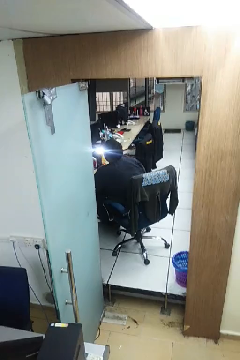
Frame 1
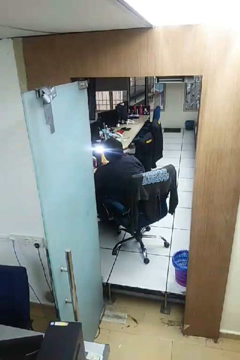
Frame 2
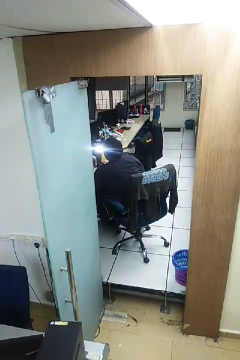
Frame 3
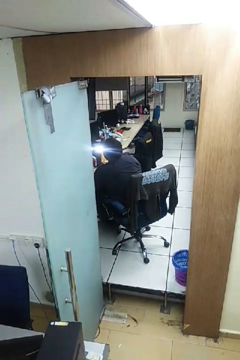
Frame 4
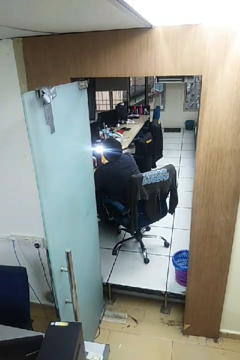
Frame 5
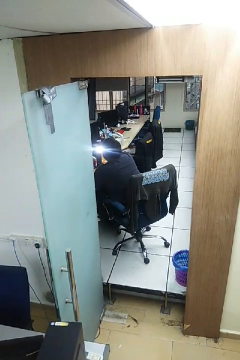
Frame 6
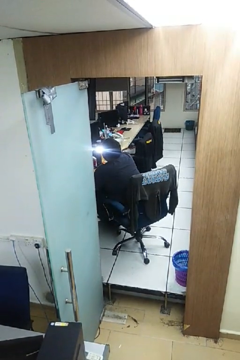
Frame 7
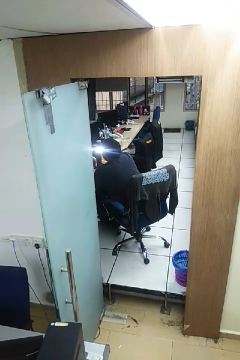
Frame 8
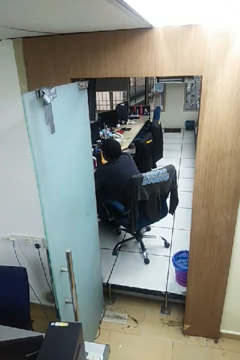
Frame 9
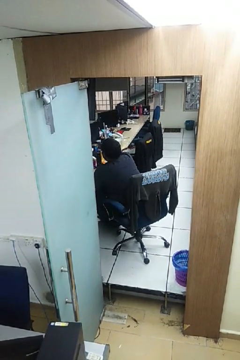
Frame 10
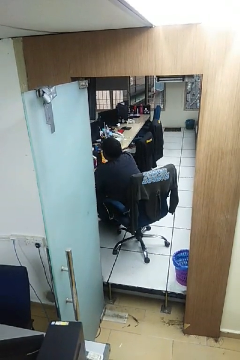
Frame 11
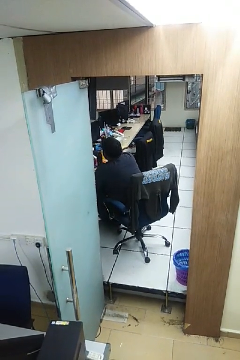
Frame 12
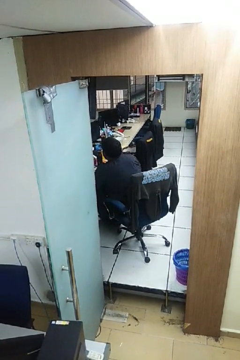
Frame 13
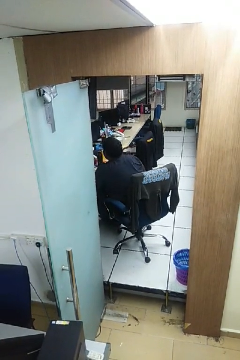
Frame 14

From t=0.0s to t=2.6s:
person turns off lamp

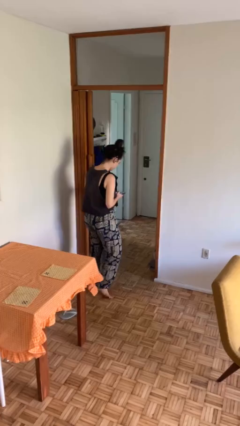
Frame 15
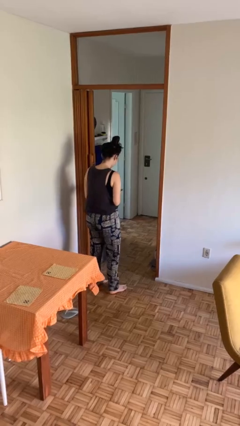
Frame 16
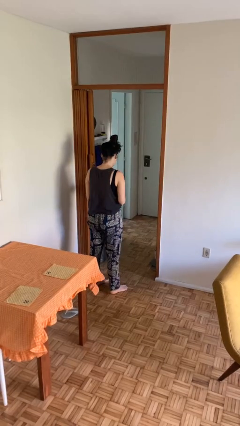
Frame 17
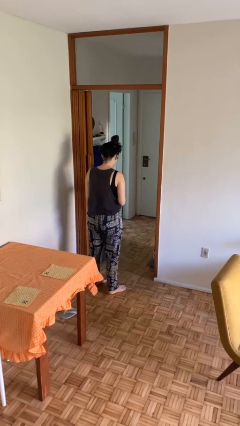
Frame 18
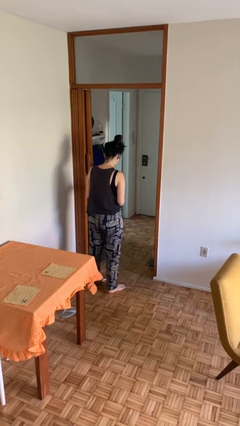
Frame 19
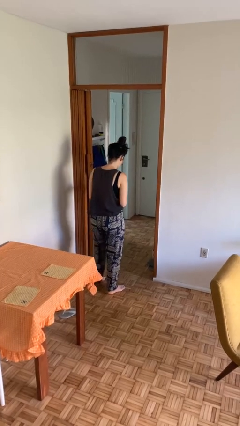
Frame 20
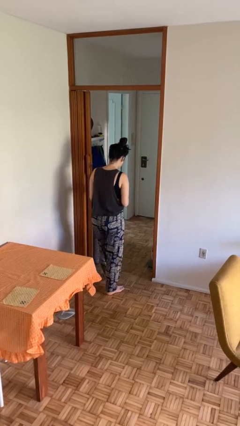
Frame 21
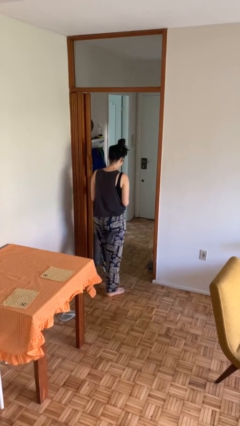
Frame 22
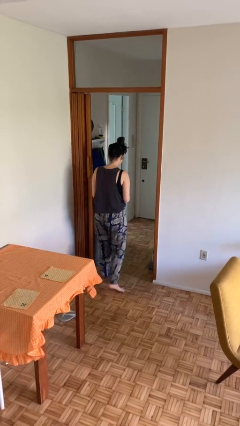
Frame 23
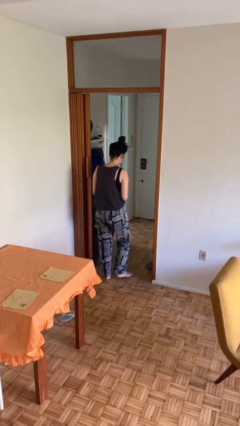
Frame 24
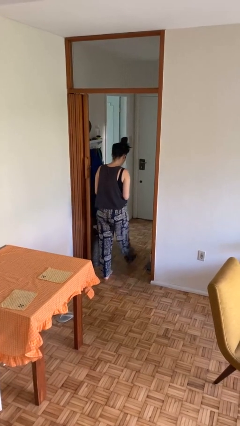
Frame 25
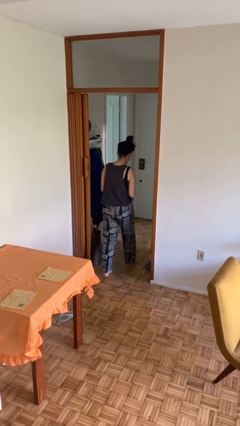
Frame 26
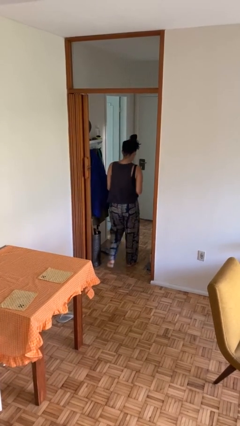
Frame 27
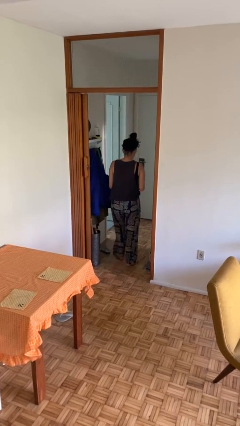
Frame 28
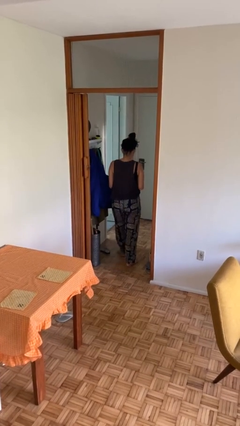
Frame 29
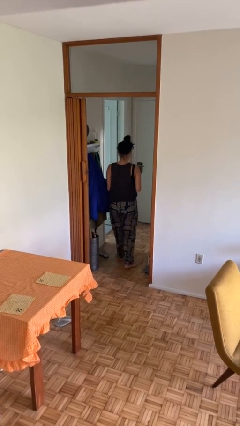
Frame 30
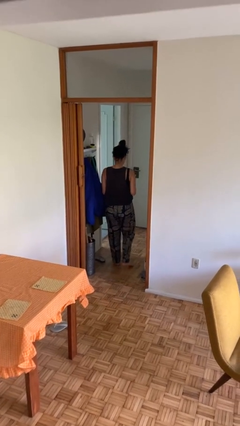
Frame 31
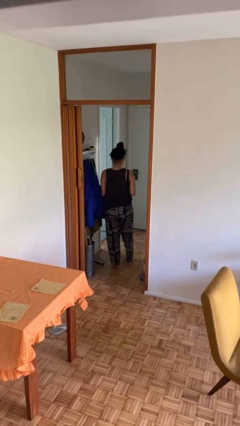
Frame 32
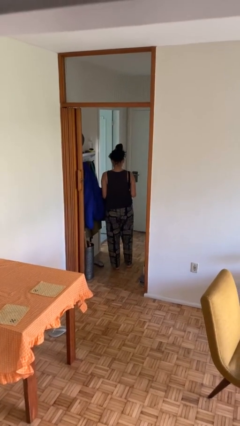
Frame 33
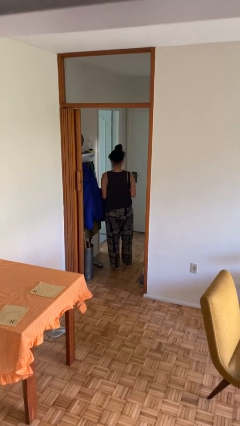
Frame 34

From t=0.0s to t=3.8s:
person exits scene through structure

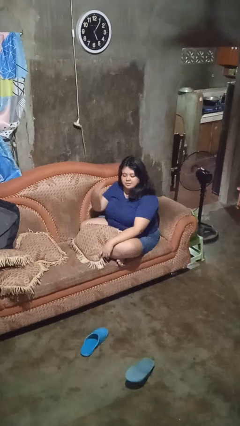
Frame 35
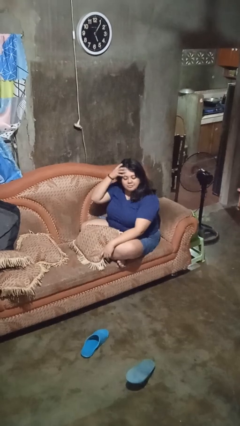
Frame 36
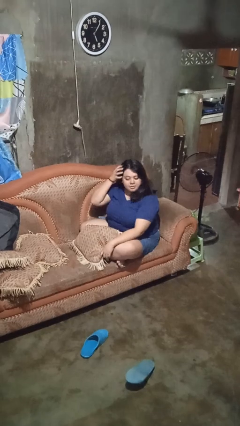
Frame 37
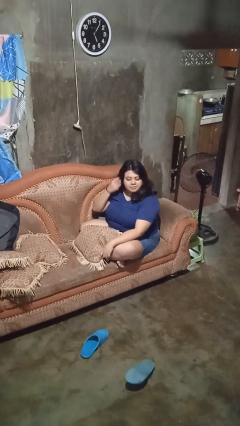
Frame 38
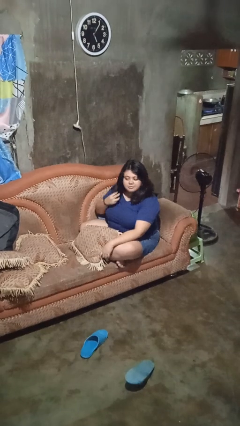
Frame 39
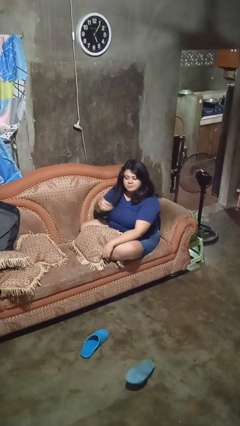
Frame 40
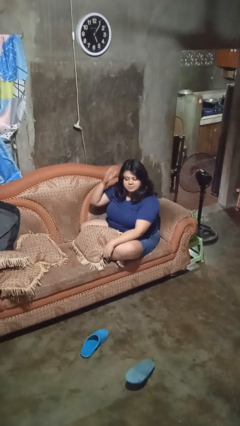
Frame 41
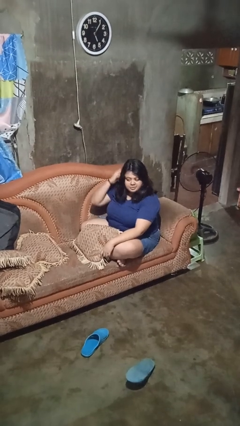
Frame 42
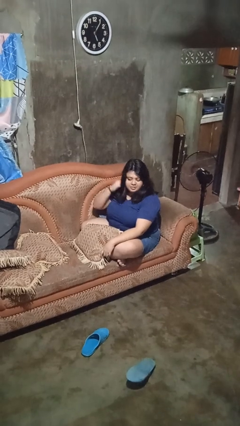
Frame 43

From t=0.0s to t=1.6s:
person strokes hair

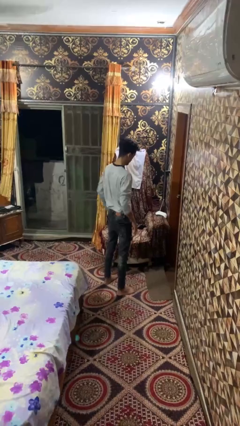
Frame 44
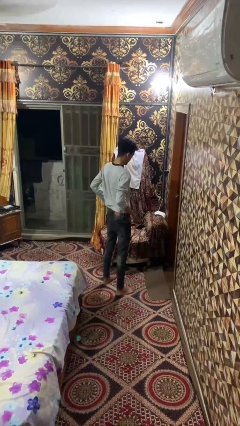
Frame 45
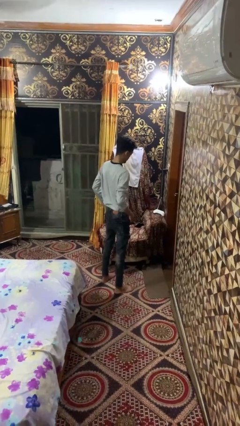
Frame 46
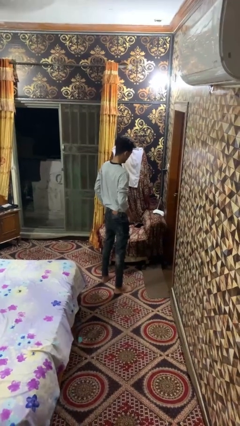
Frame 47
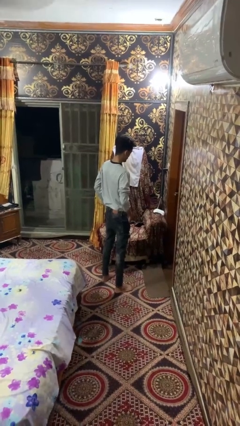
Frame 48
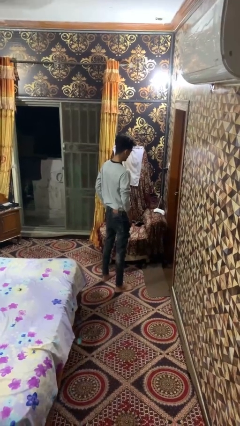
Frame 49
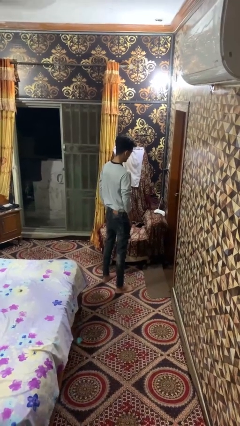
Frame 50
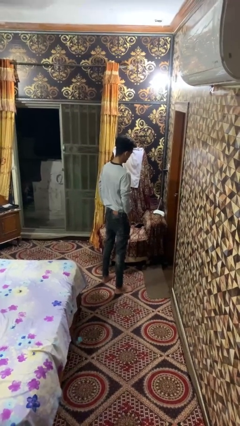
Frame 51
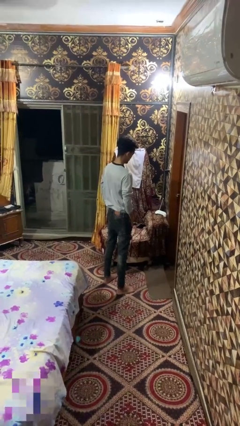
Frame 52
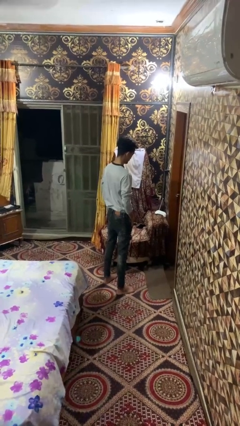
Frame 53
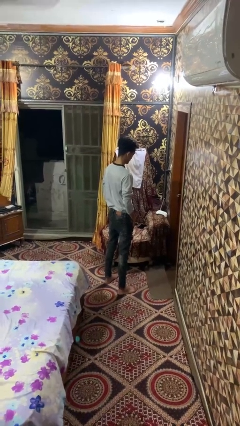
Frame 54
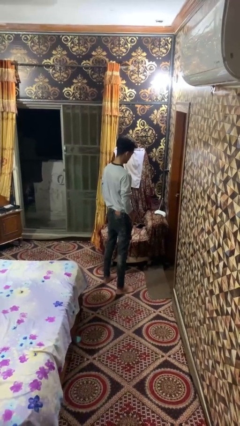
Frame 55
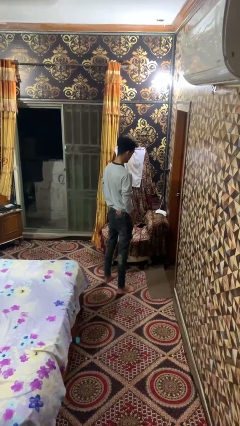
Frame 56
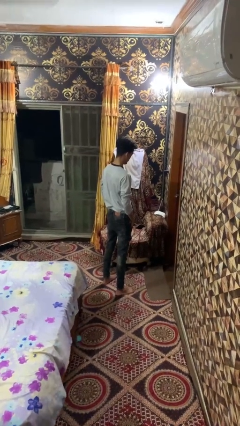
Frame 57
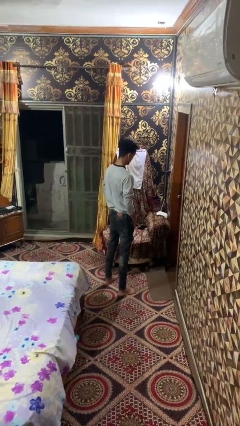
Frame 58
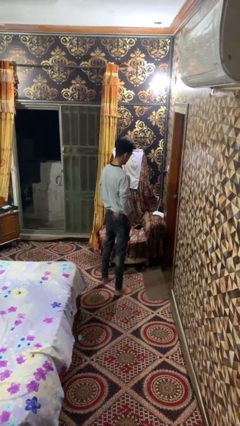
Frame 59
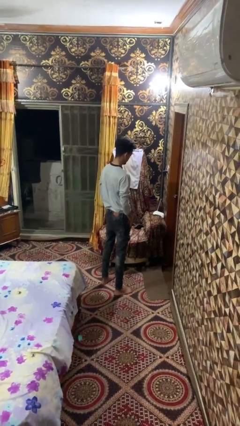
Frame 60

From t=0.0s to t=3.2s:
person puts hands in back pockets

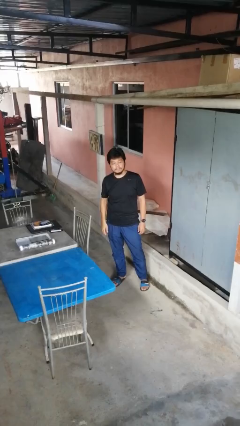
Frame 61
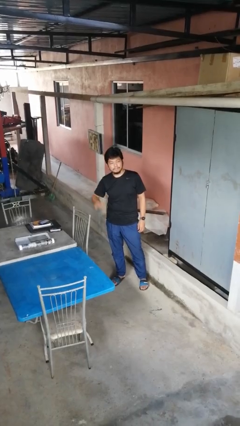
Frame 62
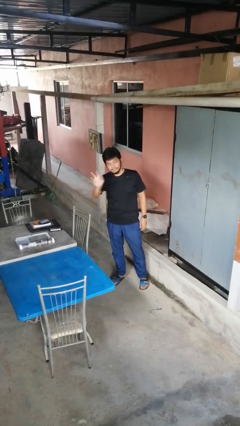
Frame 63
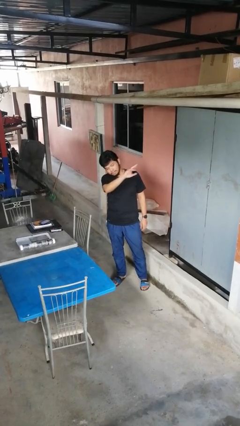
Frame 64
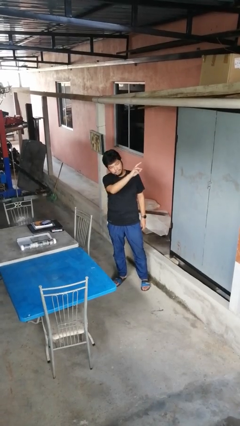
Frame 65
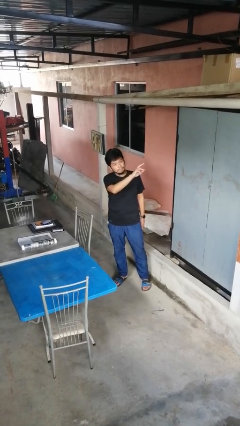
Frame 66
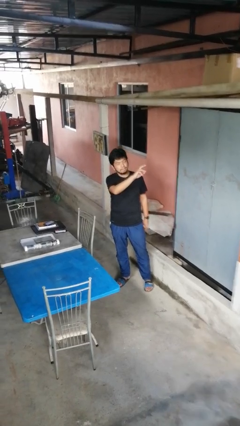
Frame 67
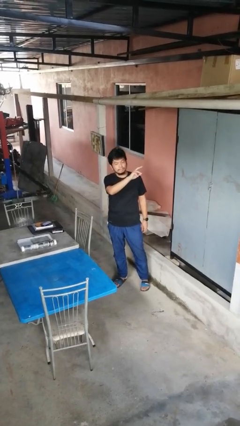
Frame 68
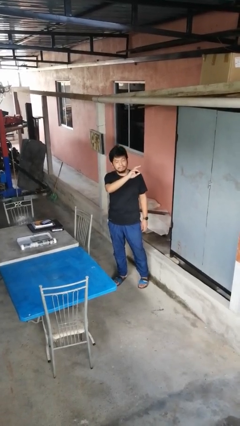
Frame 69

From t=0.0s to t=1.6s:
person gestures swipe left

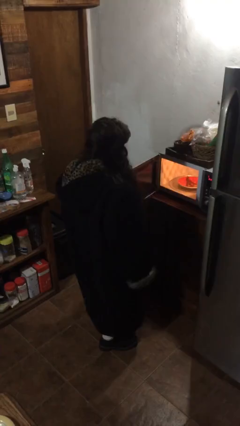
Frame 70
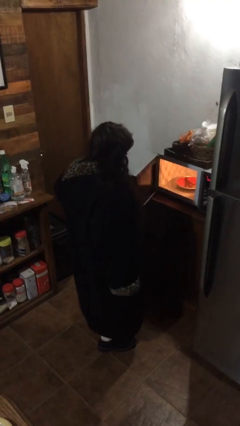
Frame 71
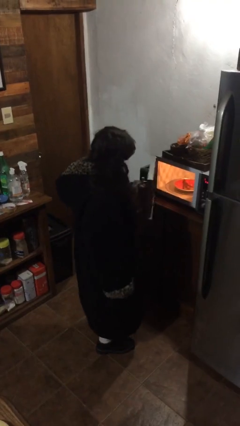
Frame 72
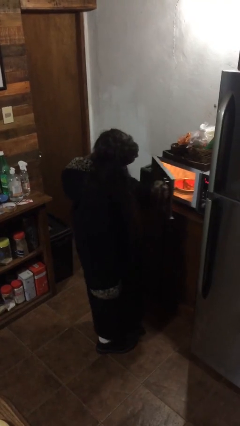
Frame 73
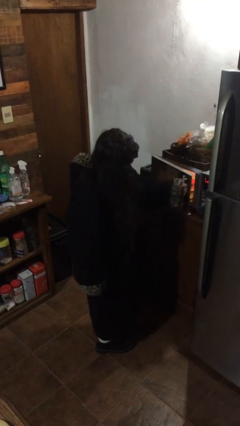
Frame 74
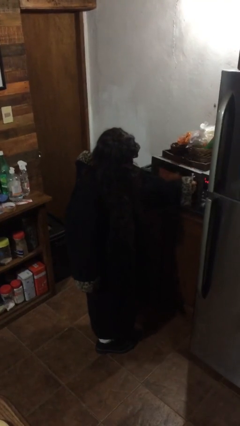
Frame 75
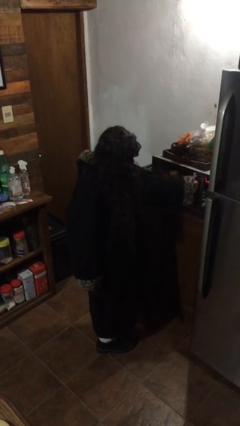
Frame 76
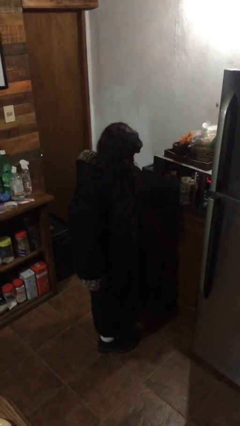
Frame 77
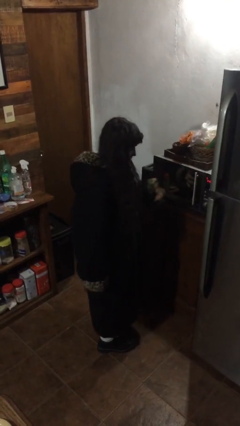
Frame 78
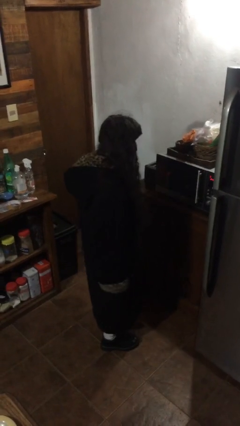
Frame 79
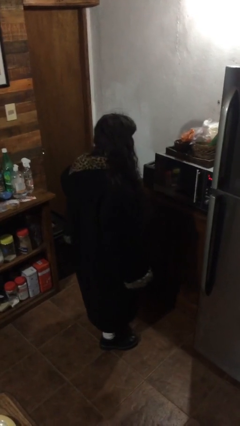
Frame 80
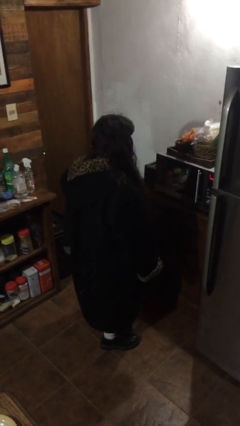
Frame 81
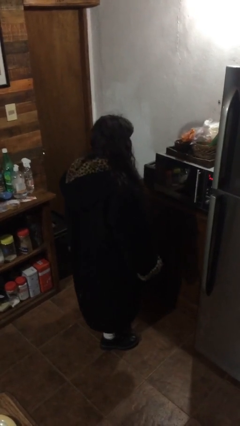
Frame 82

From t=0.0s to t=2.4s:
person closes microwave

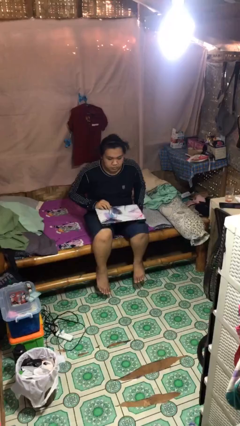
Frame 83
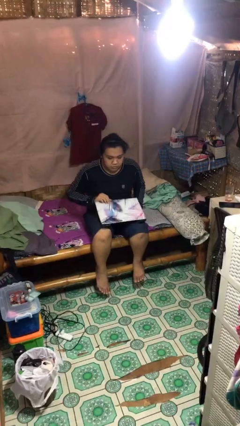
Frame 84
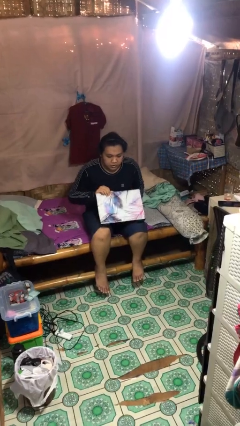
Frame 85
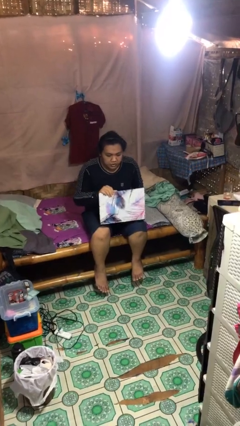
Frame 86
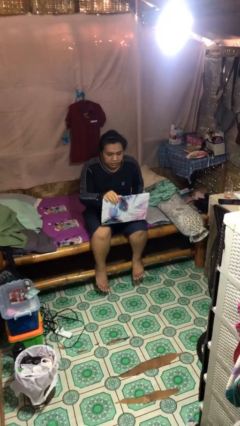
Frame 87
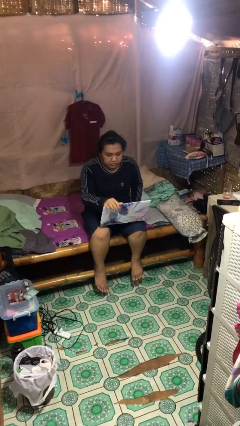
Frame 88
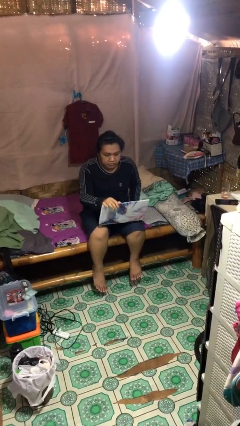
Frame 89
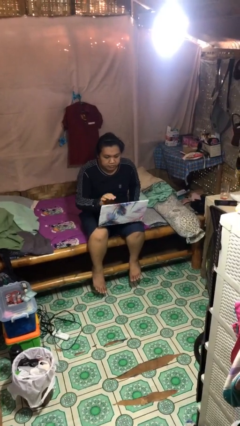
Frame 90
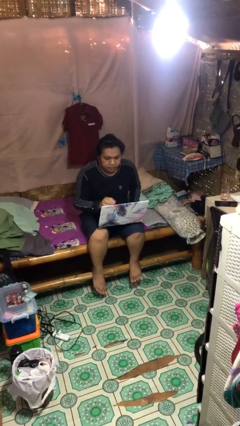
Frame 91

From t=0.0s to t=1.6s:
person opens laptop

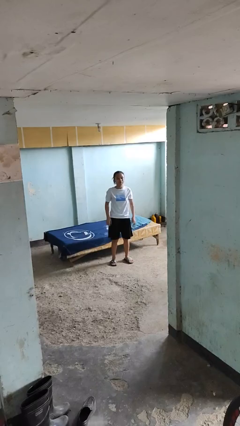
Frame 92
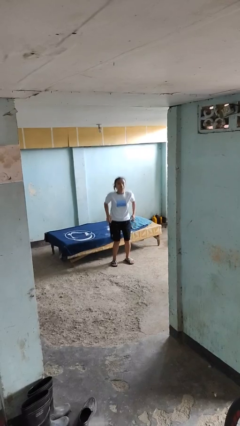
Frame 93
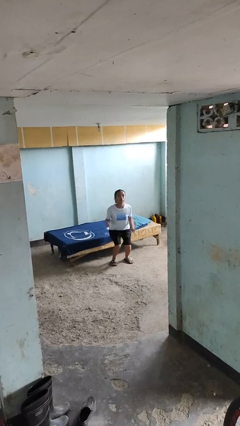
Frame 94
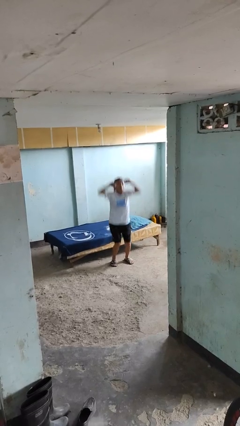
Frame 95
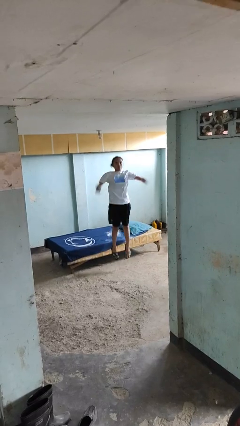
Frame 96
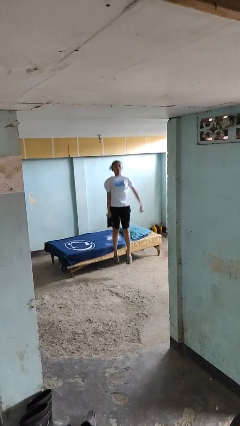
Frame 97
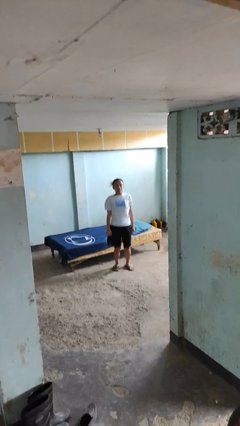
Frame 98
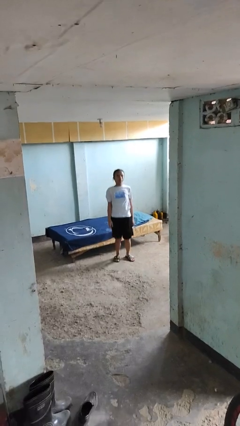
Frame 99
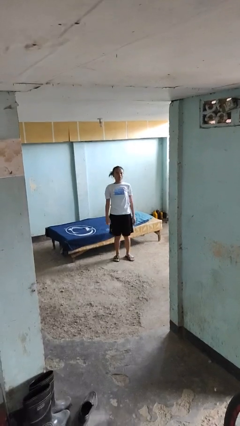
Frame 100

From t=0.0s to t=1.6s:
person jumps
